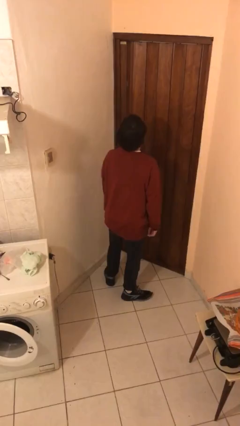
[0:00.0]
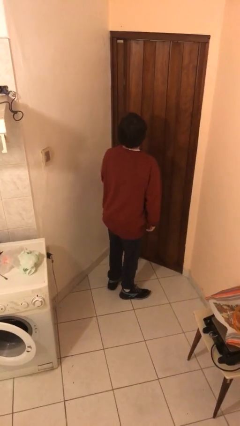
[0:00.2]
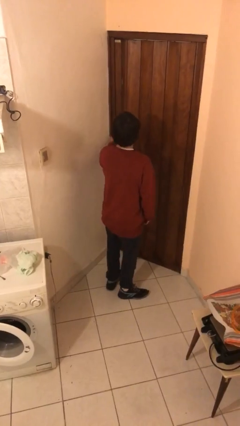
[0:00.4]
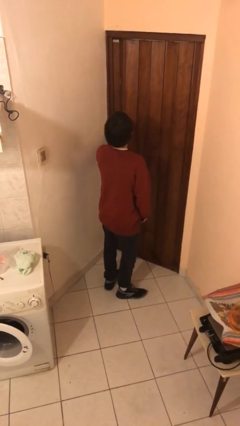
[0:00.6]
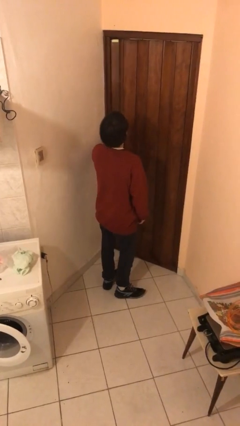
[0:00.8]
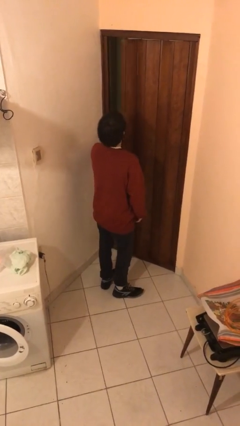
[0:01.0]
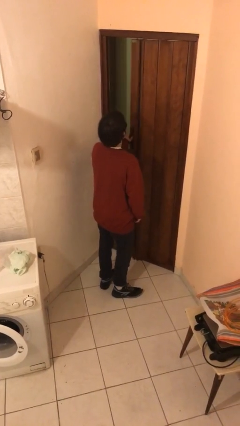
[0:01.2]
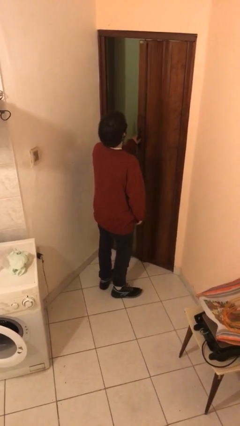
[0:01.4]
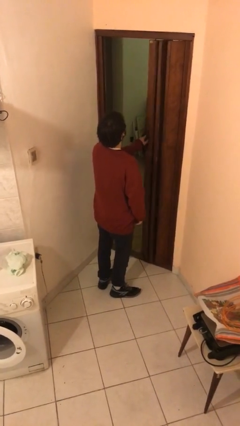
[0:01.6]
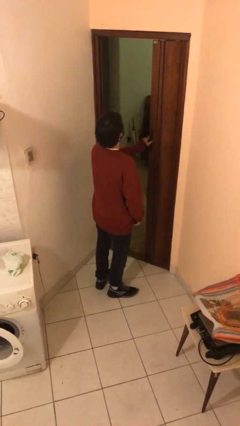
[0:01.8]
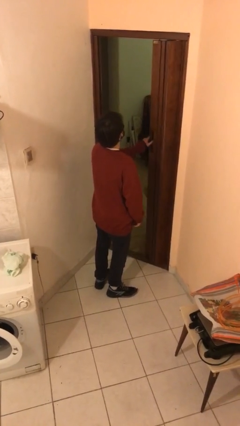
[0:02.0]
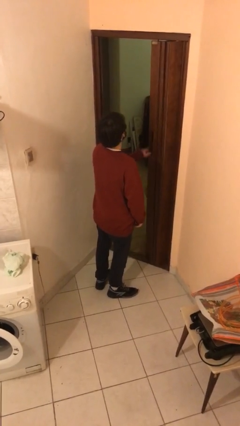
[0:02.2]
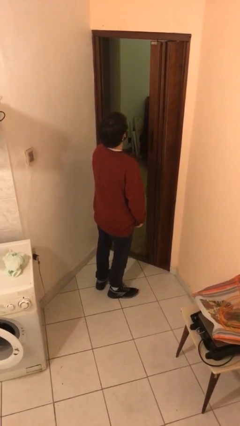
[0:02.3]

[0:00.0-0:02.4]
person opens sliding door

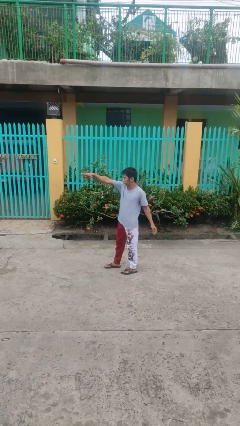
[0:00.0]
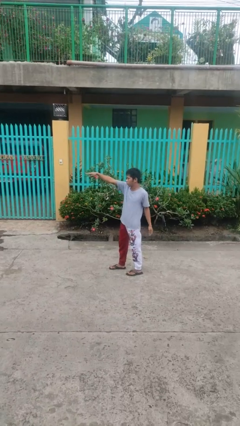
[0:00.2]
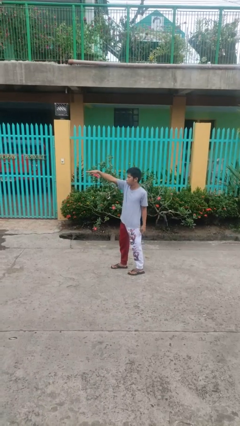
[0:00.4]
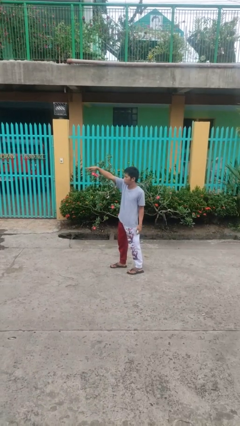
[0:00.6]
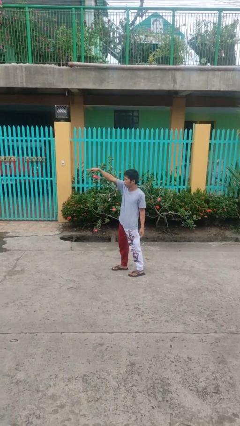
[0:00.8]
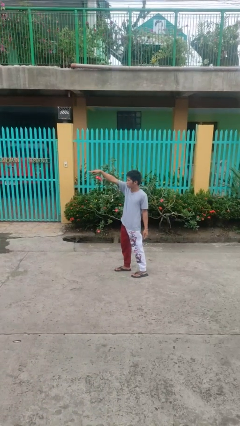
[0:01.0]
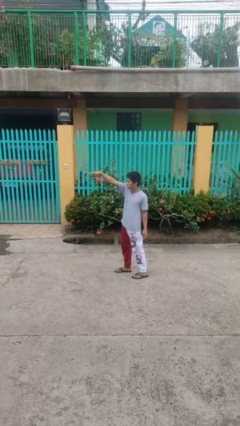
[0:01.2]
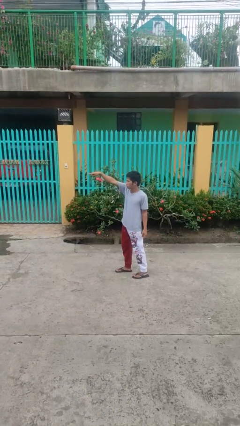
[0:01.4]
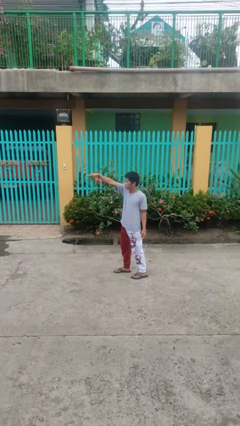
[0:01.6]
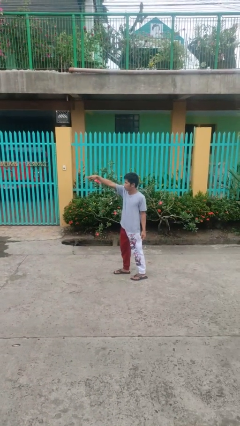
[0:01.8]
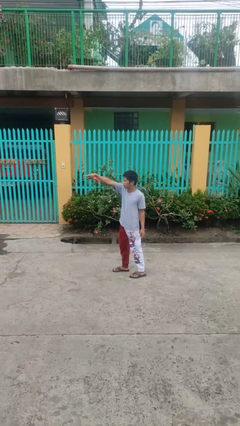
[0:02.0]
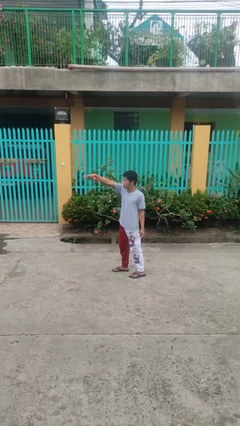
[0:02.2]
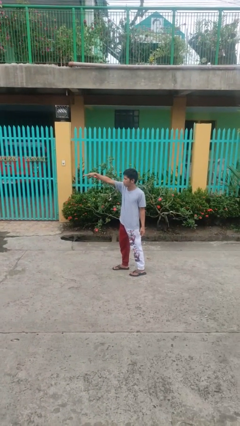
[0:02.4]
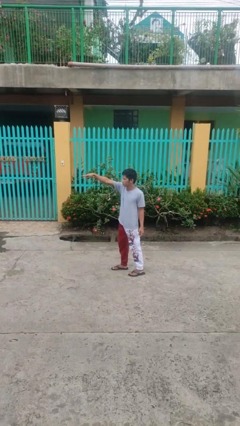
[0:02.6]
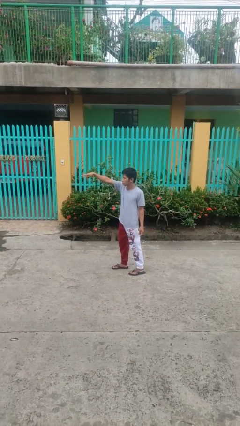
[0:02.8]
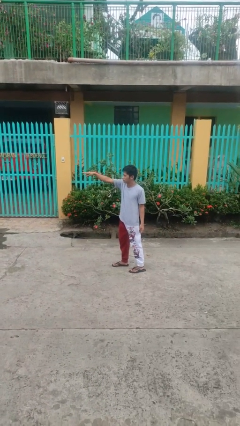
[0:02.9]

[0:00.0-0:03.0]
person points at person

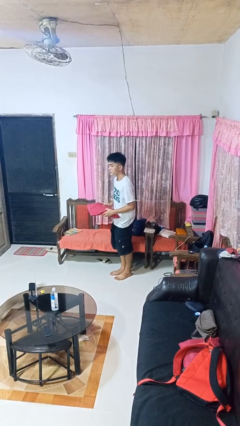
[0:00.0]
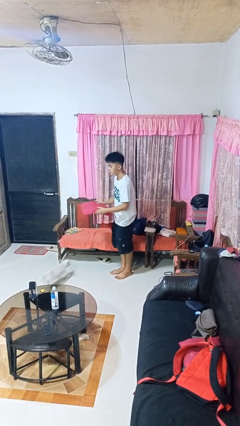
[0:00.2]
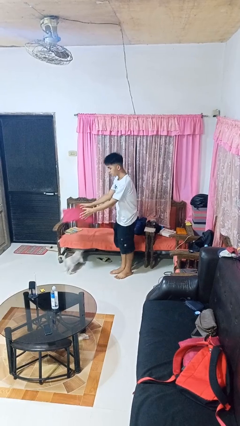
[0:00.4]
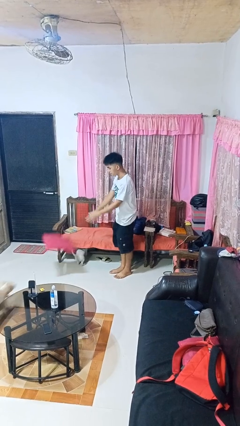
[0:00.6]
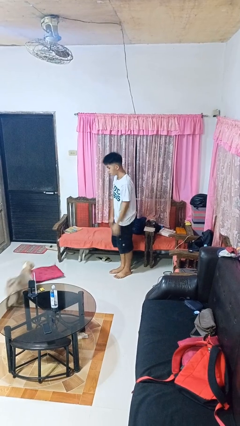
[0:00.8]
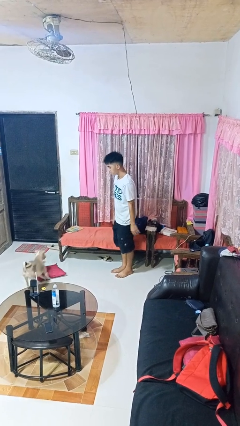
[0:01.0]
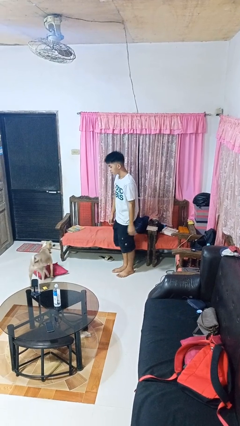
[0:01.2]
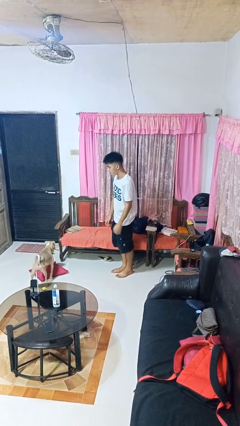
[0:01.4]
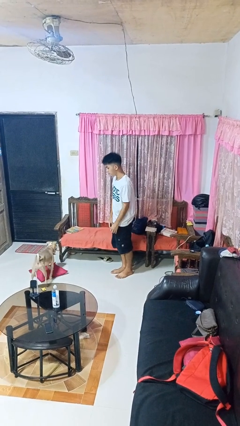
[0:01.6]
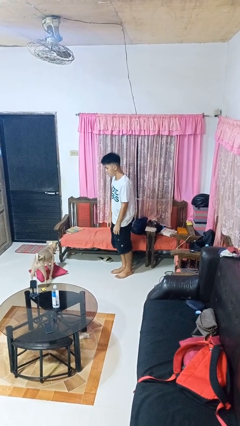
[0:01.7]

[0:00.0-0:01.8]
person throws object to ground

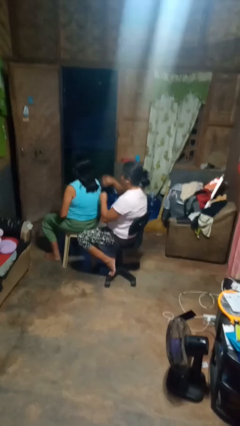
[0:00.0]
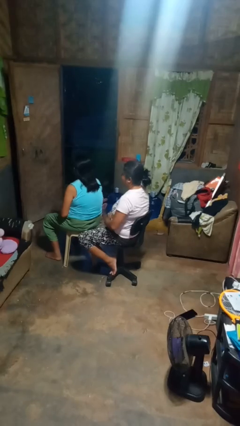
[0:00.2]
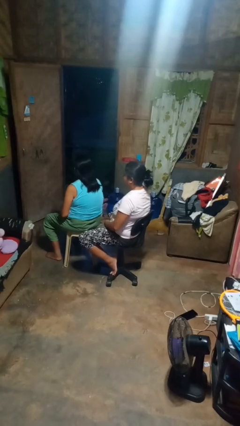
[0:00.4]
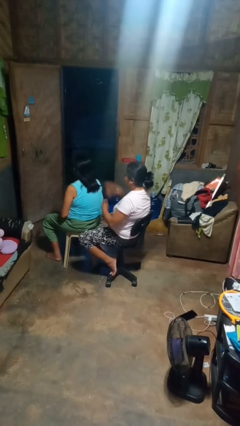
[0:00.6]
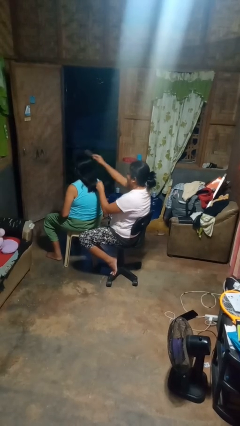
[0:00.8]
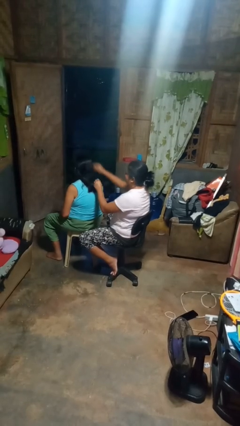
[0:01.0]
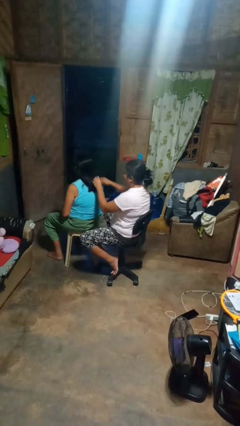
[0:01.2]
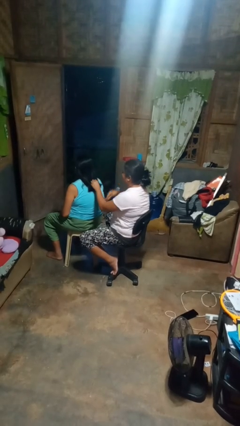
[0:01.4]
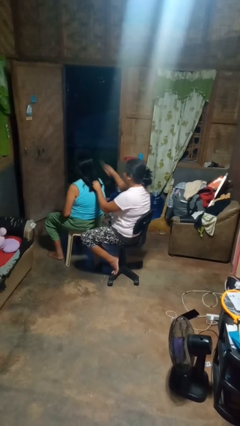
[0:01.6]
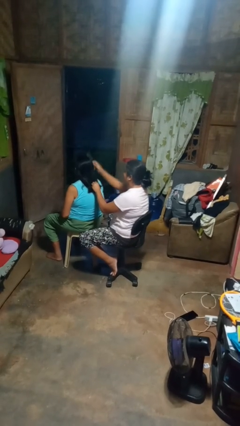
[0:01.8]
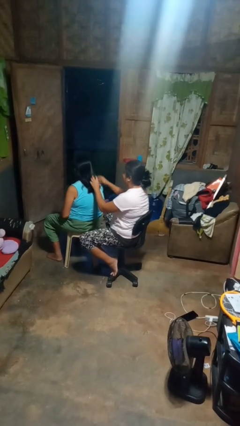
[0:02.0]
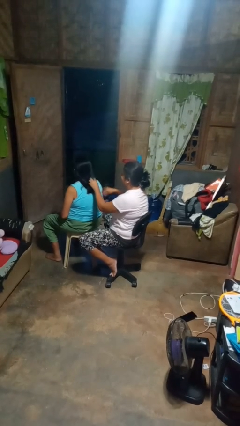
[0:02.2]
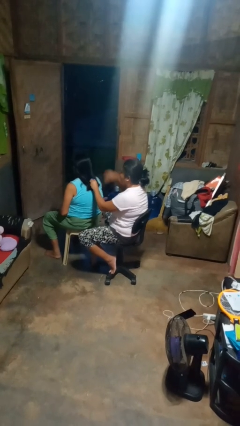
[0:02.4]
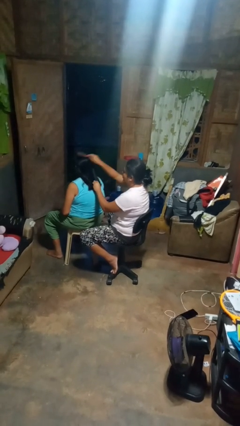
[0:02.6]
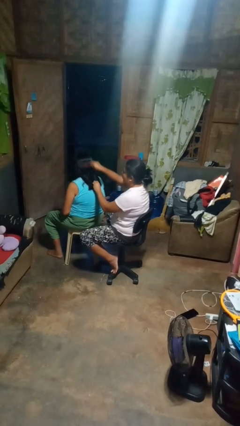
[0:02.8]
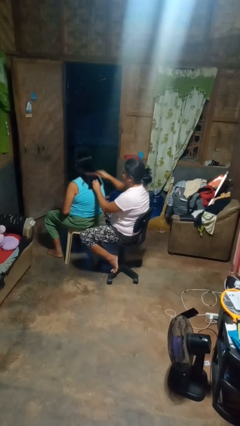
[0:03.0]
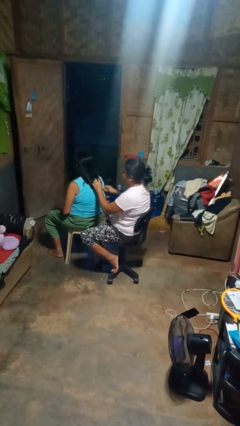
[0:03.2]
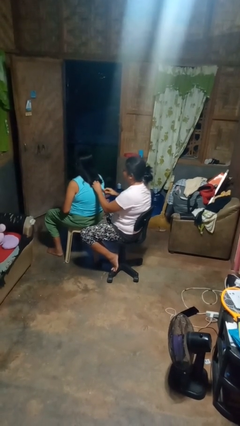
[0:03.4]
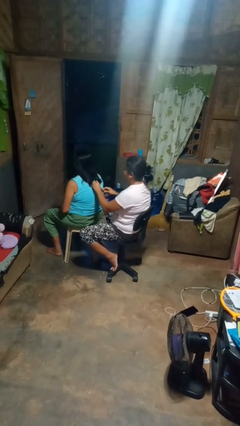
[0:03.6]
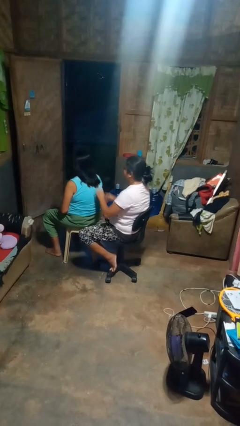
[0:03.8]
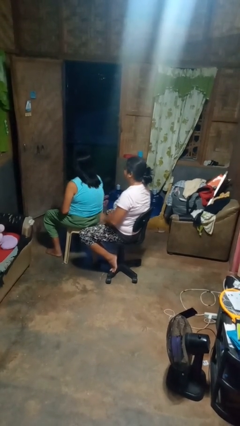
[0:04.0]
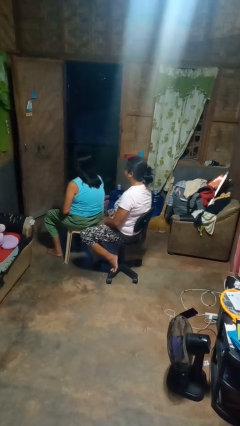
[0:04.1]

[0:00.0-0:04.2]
person brushes hair of person

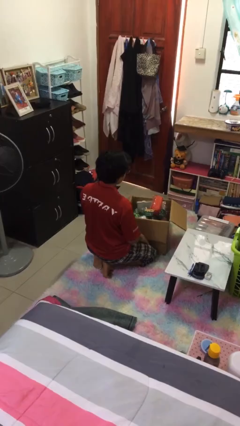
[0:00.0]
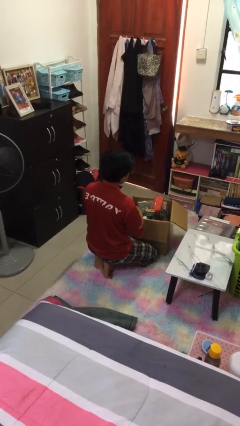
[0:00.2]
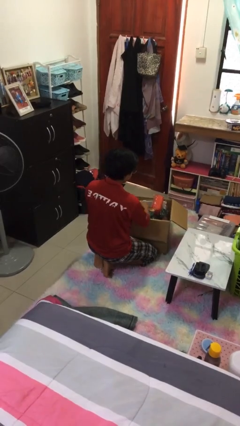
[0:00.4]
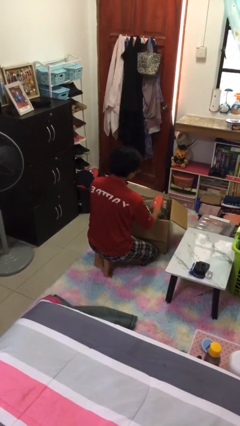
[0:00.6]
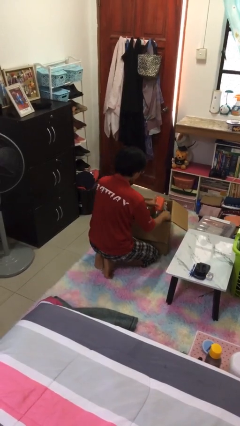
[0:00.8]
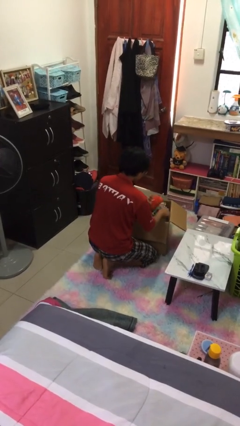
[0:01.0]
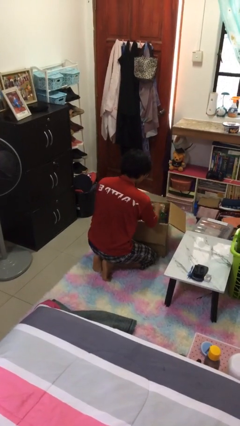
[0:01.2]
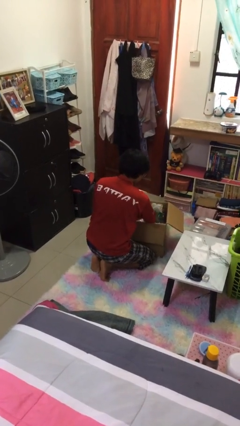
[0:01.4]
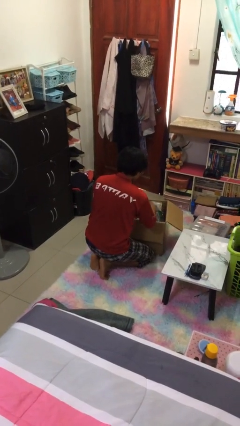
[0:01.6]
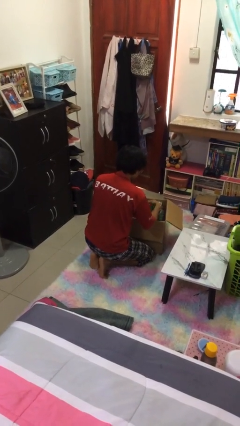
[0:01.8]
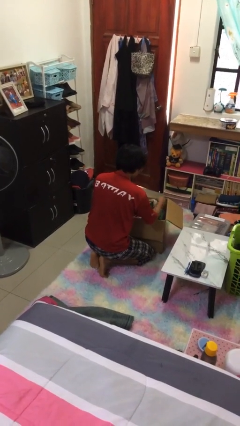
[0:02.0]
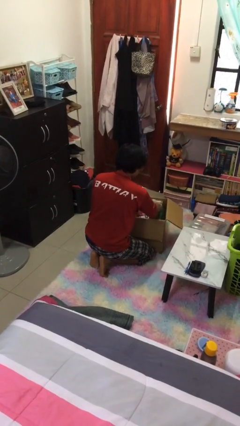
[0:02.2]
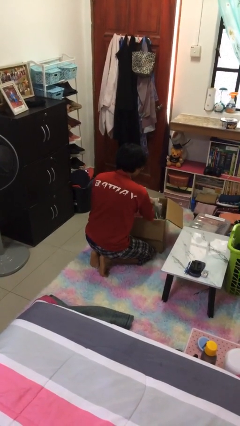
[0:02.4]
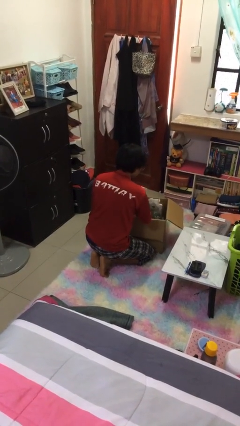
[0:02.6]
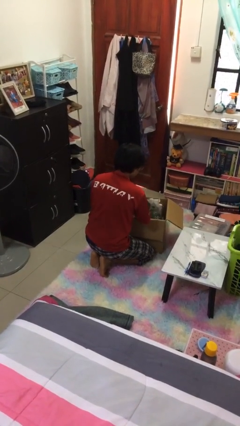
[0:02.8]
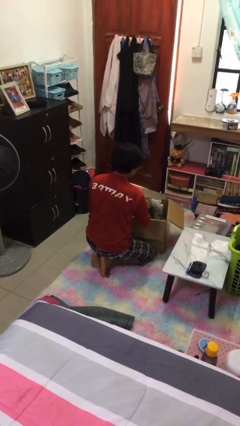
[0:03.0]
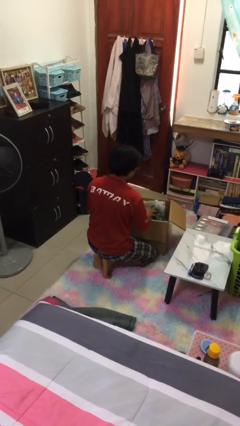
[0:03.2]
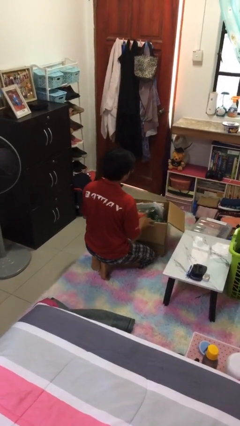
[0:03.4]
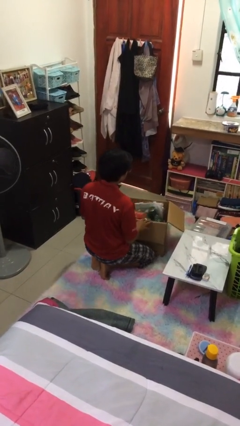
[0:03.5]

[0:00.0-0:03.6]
person searches in box

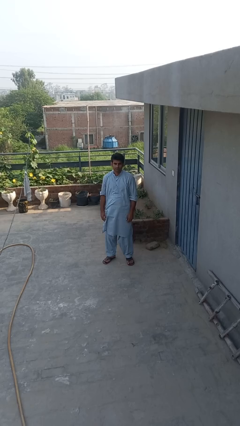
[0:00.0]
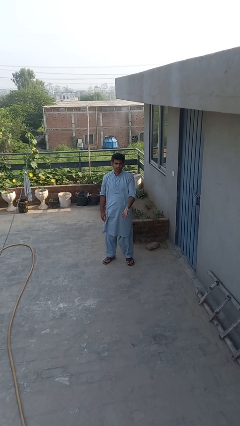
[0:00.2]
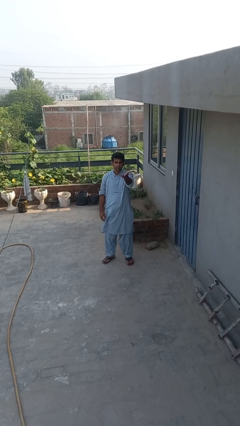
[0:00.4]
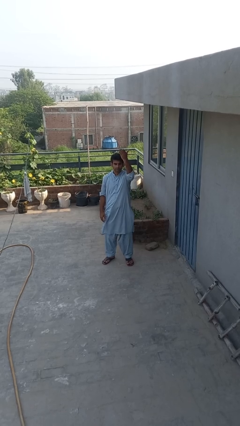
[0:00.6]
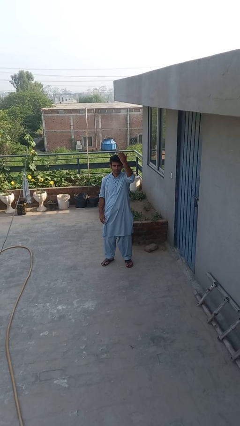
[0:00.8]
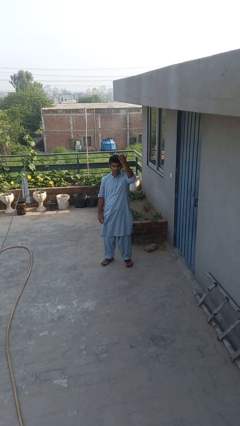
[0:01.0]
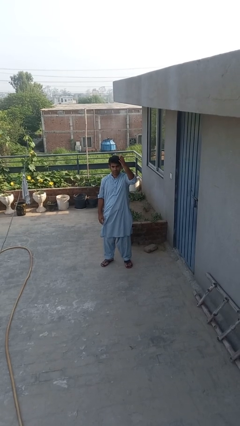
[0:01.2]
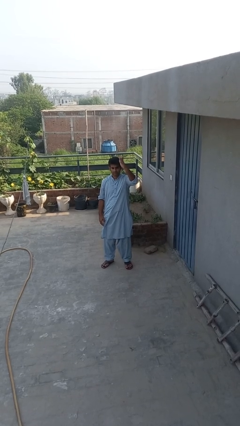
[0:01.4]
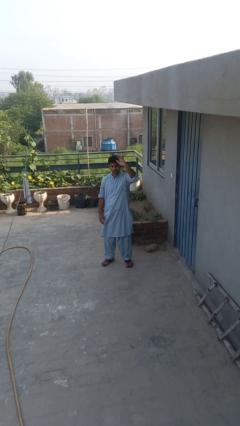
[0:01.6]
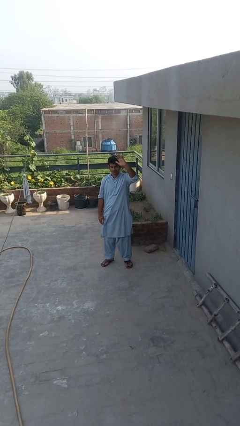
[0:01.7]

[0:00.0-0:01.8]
person gestures swipe up

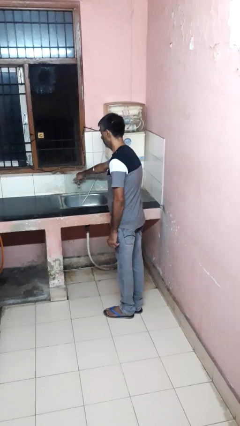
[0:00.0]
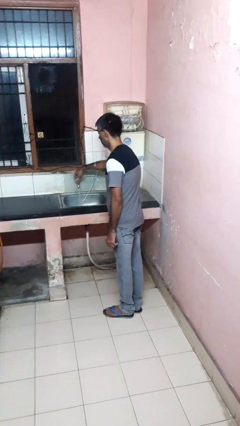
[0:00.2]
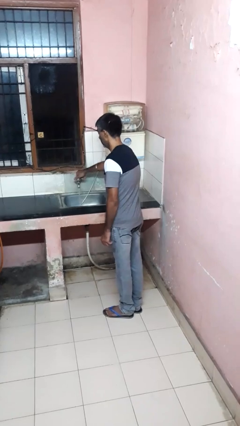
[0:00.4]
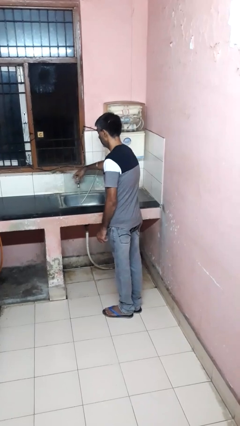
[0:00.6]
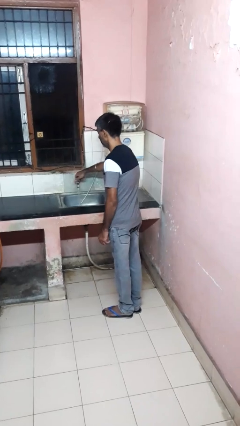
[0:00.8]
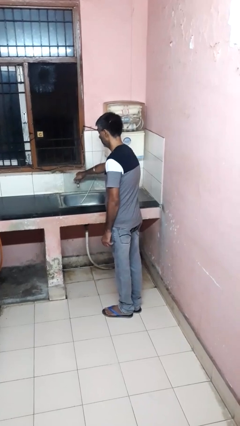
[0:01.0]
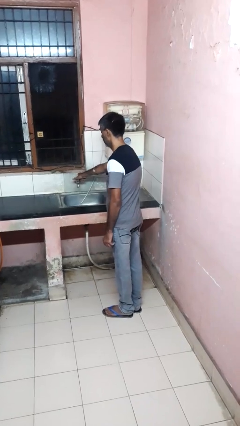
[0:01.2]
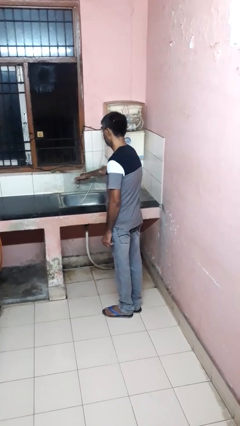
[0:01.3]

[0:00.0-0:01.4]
person turns off faucet
